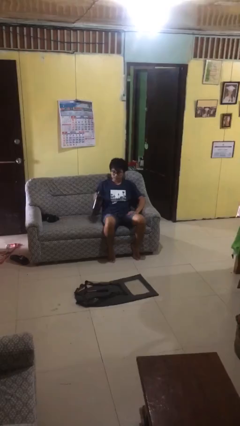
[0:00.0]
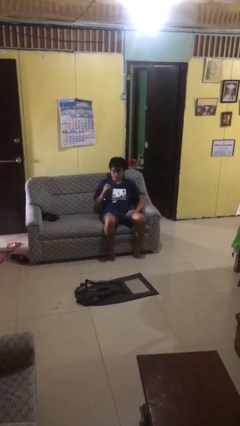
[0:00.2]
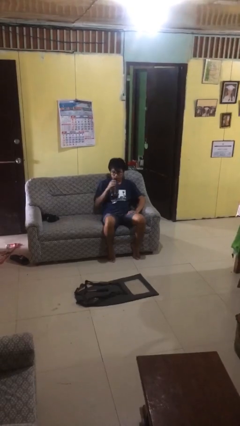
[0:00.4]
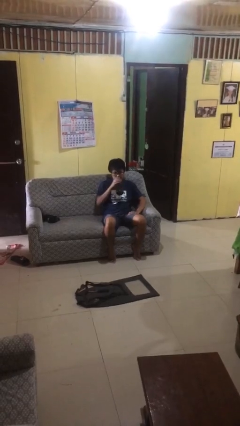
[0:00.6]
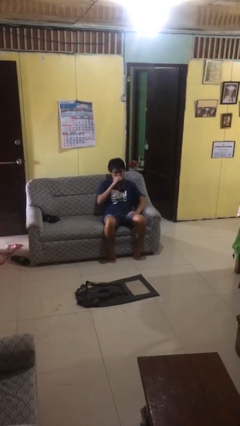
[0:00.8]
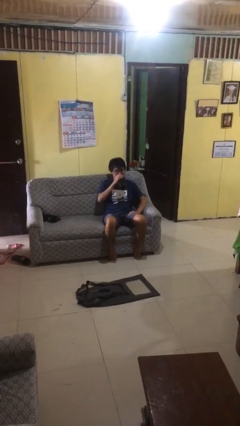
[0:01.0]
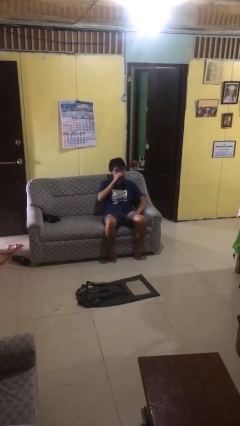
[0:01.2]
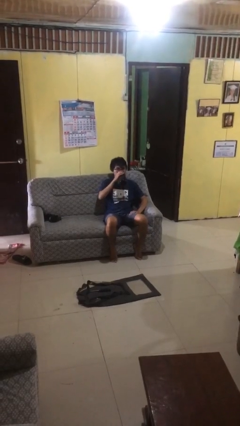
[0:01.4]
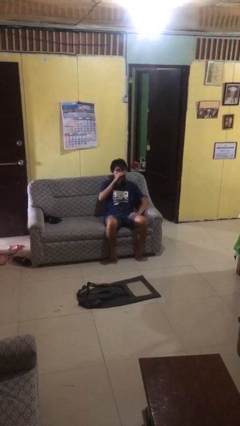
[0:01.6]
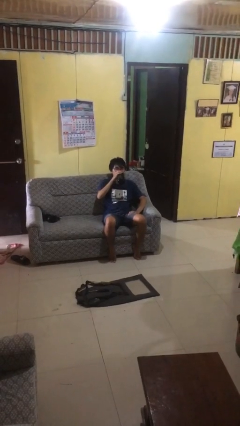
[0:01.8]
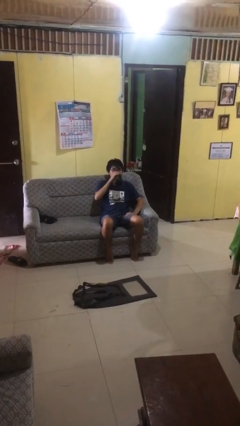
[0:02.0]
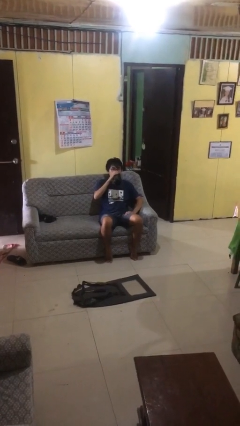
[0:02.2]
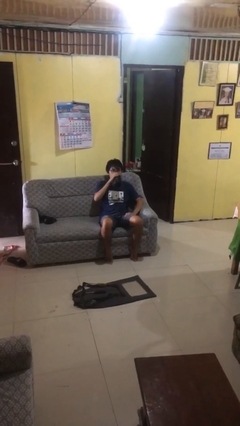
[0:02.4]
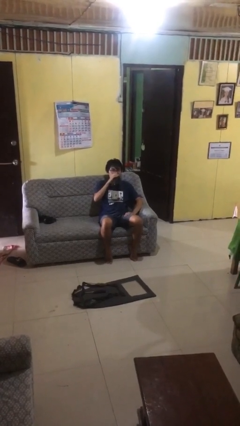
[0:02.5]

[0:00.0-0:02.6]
person drinks from bottle

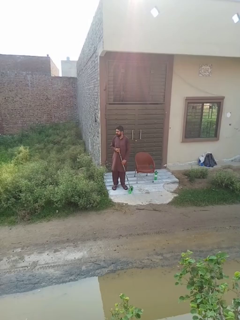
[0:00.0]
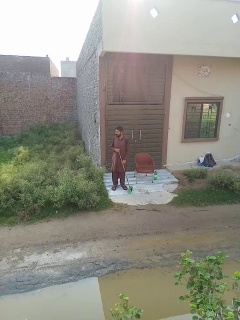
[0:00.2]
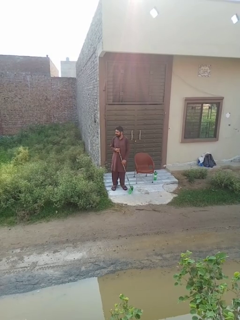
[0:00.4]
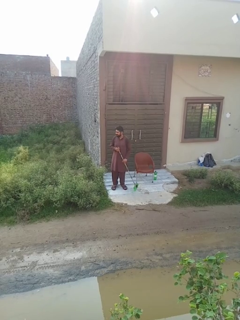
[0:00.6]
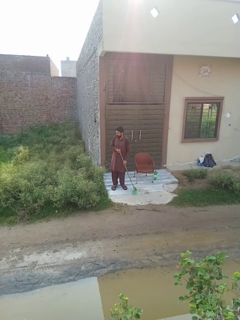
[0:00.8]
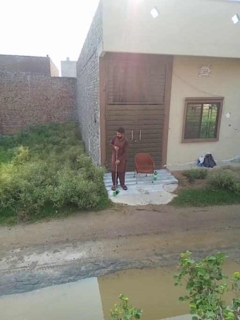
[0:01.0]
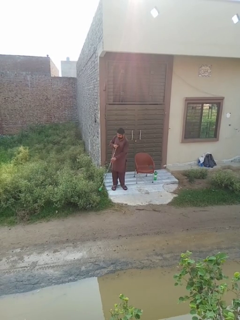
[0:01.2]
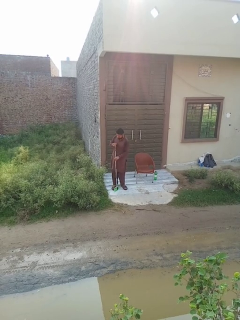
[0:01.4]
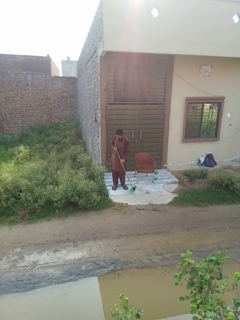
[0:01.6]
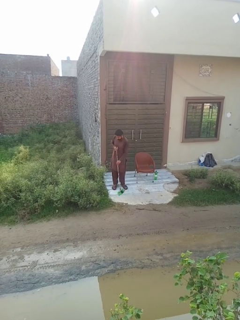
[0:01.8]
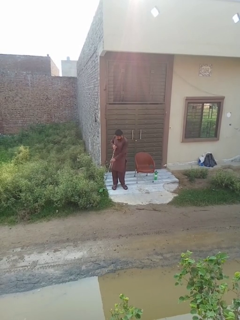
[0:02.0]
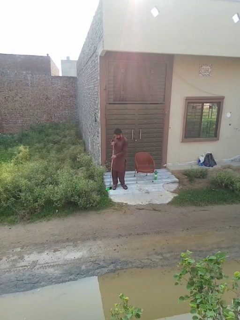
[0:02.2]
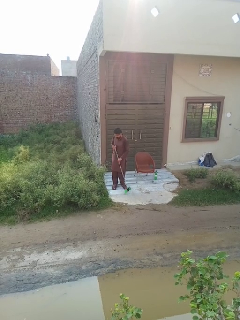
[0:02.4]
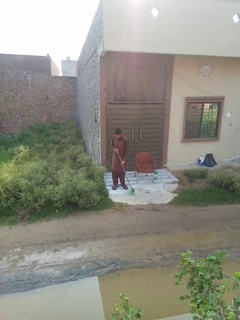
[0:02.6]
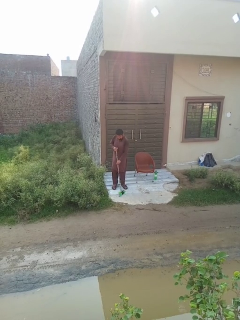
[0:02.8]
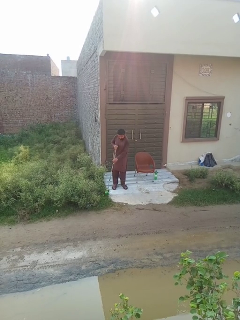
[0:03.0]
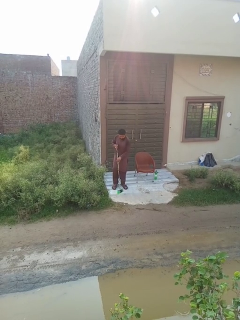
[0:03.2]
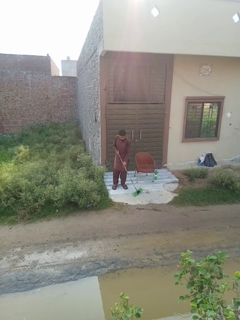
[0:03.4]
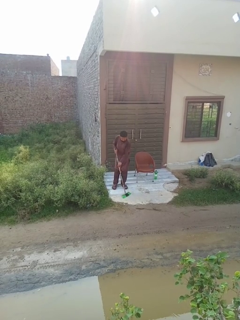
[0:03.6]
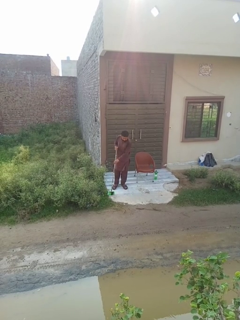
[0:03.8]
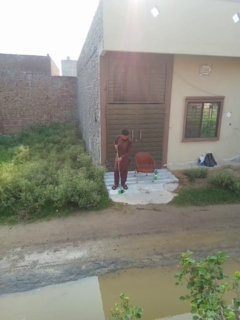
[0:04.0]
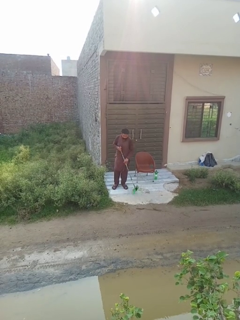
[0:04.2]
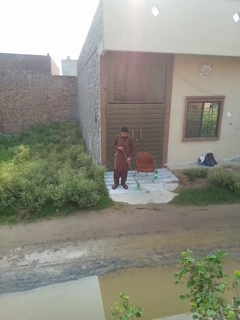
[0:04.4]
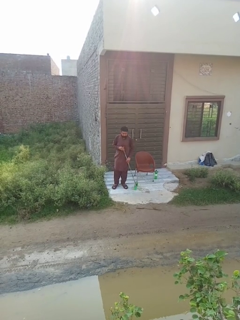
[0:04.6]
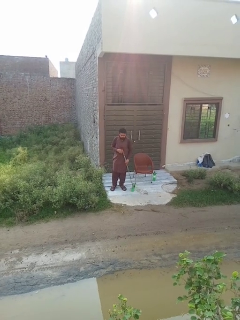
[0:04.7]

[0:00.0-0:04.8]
person sweeps floor

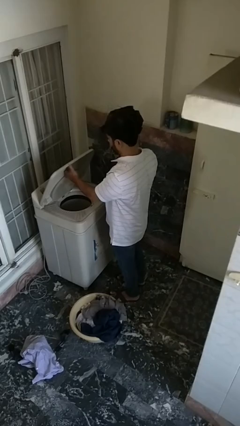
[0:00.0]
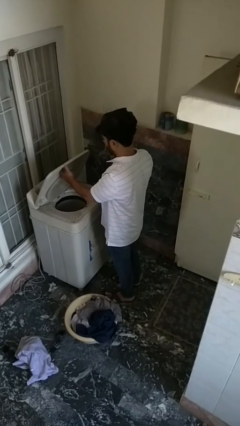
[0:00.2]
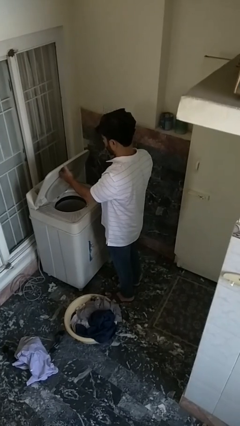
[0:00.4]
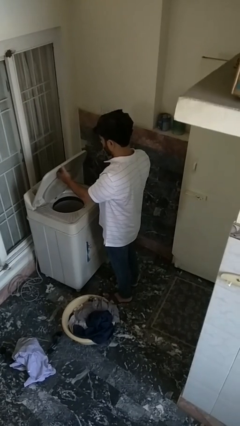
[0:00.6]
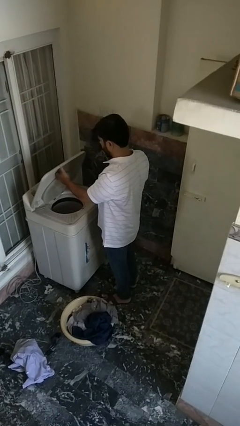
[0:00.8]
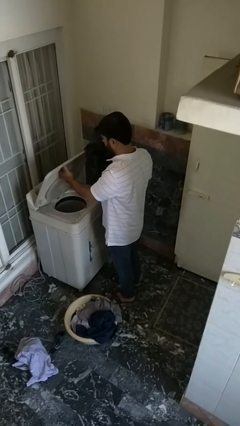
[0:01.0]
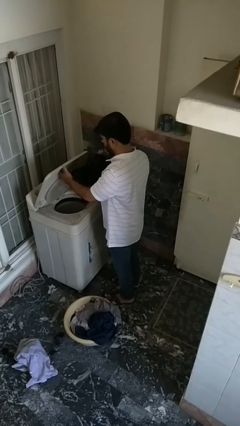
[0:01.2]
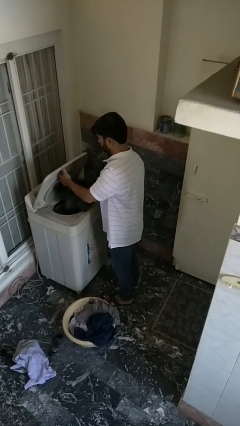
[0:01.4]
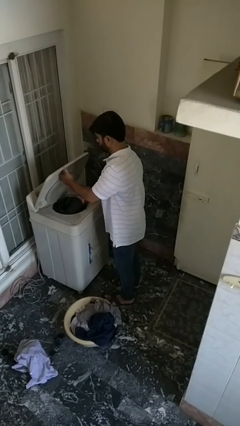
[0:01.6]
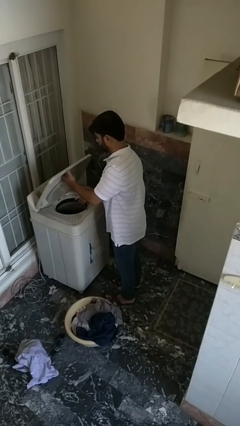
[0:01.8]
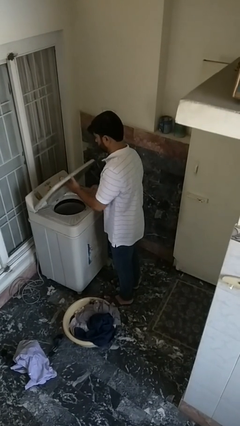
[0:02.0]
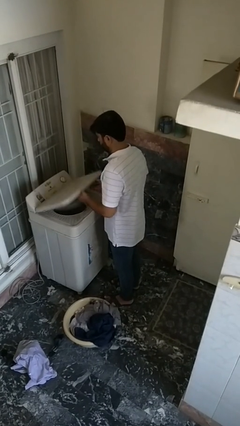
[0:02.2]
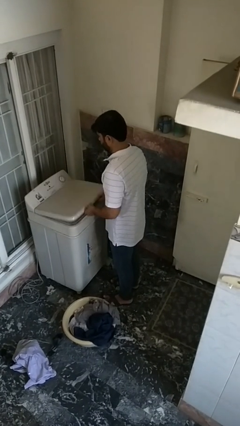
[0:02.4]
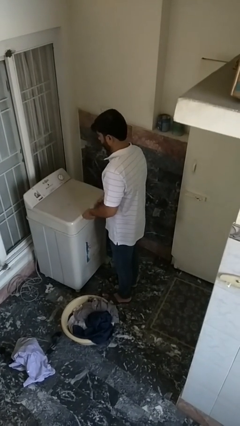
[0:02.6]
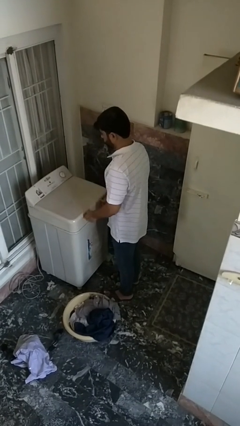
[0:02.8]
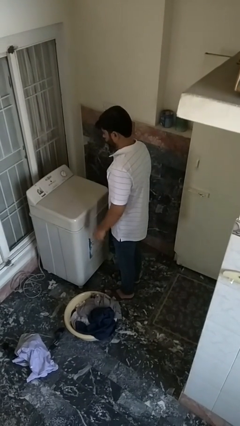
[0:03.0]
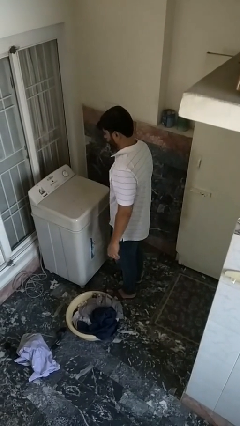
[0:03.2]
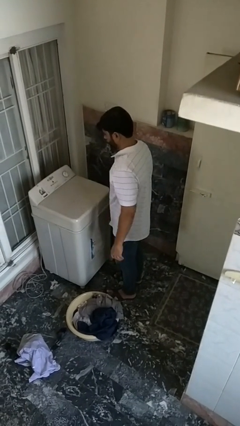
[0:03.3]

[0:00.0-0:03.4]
person loads dryer

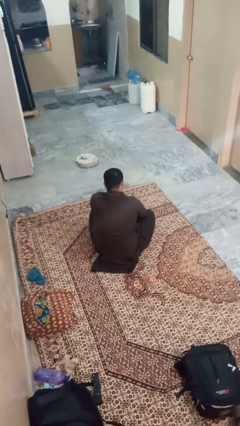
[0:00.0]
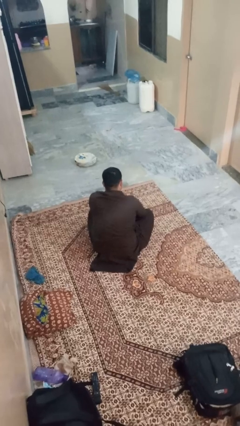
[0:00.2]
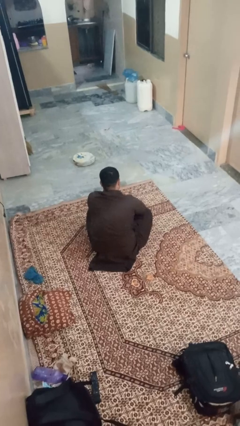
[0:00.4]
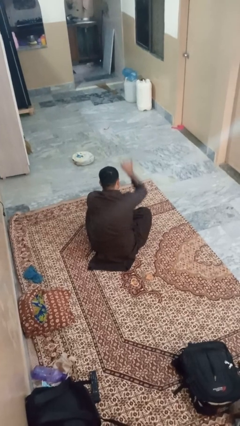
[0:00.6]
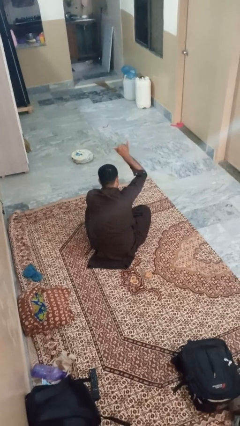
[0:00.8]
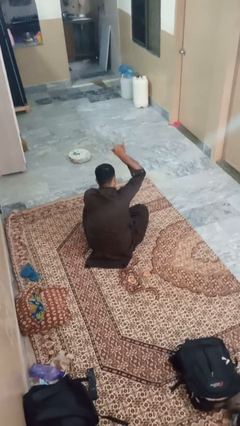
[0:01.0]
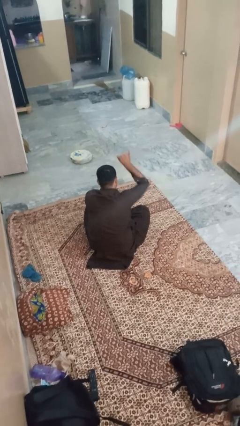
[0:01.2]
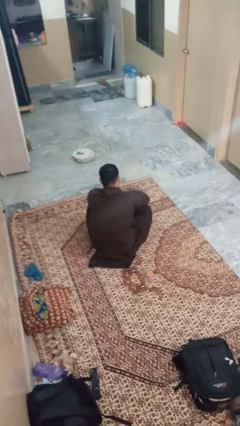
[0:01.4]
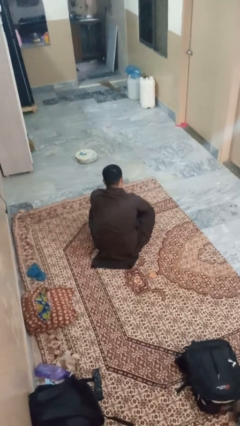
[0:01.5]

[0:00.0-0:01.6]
person gestures hang loose

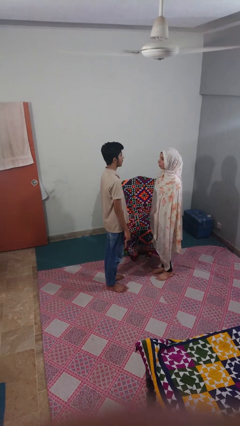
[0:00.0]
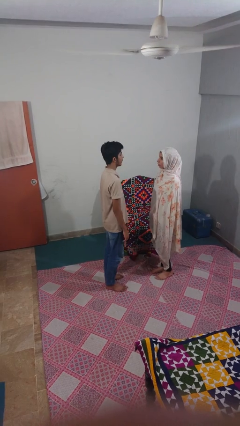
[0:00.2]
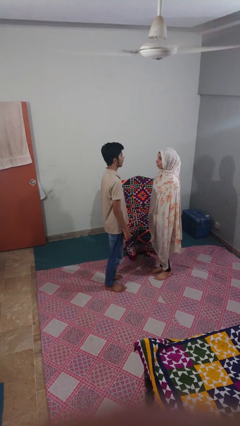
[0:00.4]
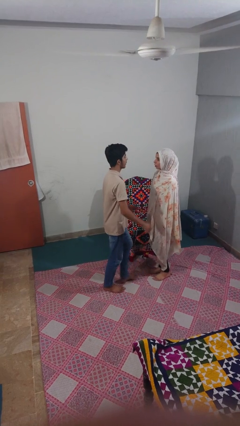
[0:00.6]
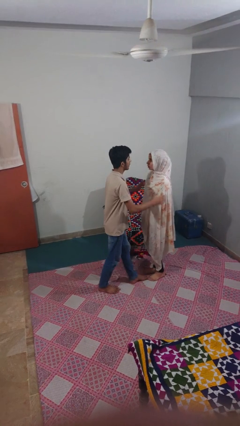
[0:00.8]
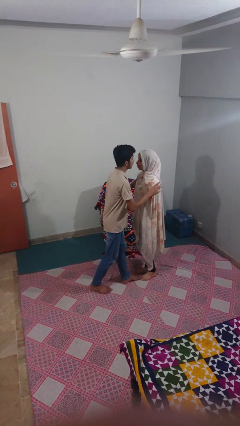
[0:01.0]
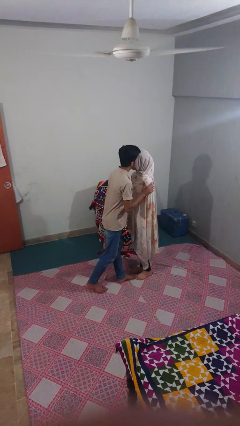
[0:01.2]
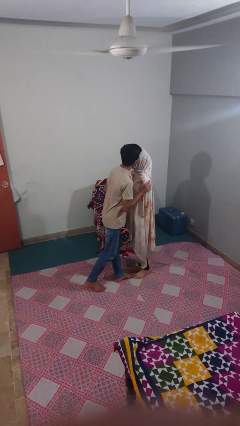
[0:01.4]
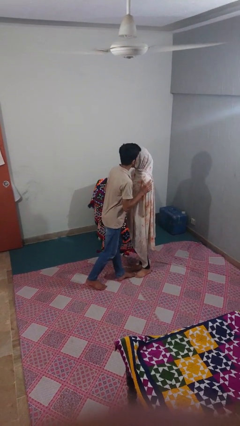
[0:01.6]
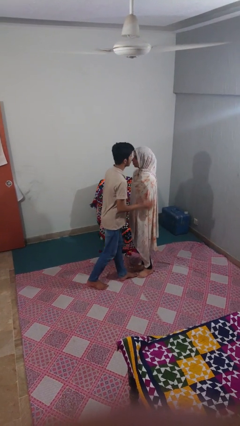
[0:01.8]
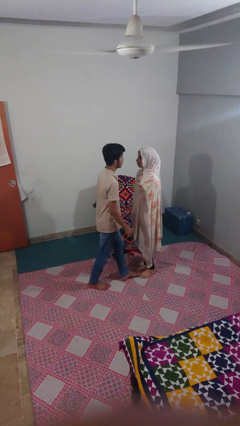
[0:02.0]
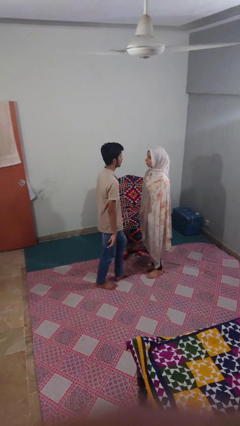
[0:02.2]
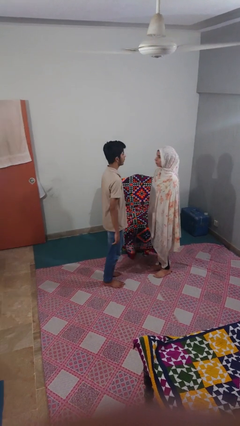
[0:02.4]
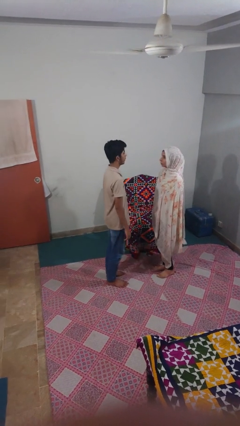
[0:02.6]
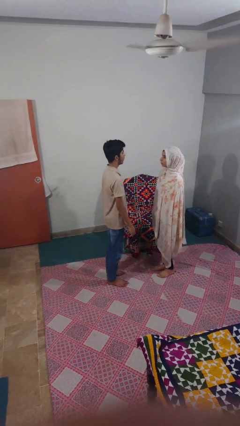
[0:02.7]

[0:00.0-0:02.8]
person kisses cheek of person

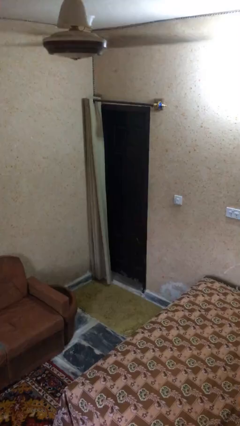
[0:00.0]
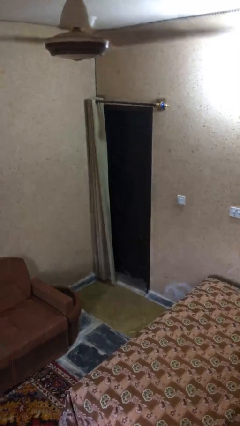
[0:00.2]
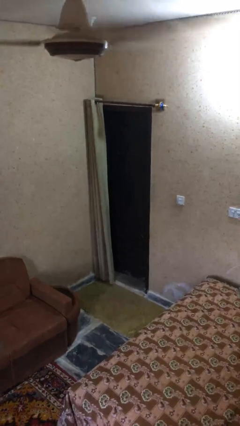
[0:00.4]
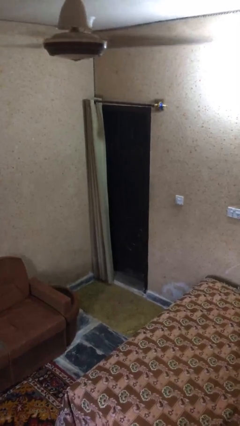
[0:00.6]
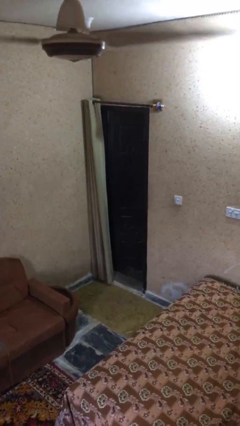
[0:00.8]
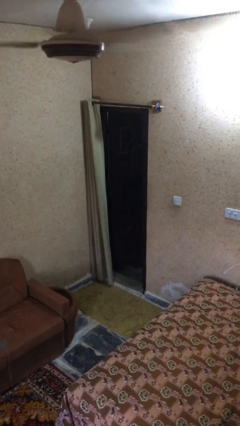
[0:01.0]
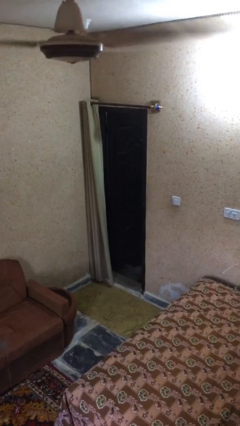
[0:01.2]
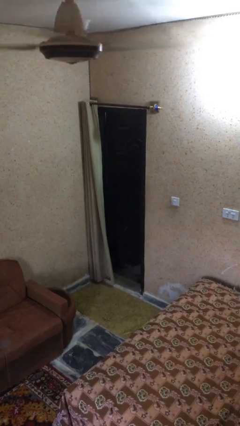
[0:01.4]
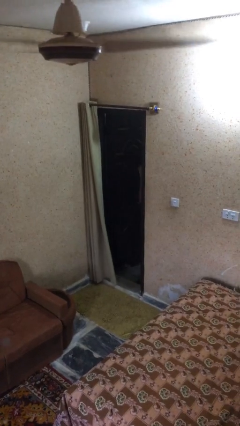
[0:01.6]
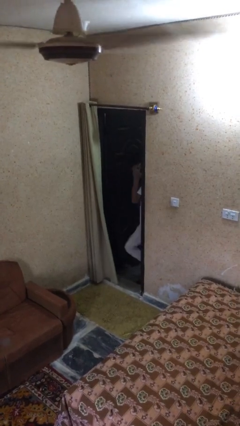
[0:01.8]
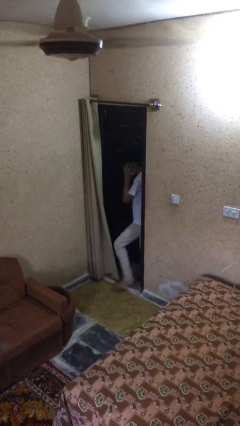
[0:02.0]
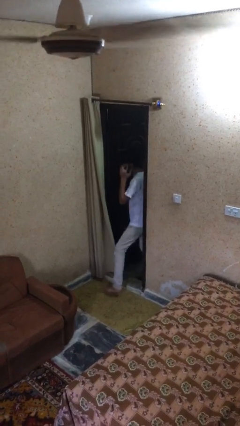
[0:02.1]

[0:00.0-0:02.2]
person opens facility door

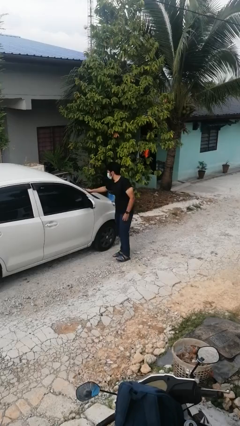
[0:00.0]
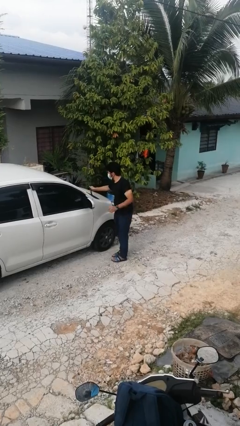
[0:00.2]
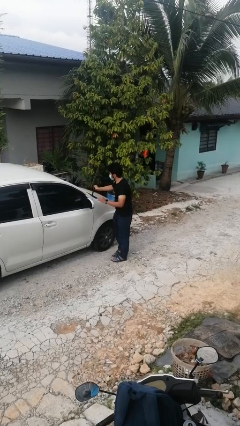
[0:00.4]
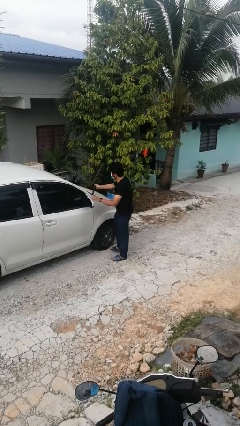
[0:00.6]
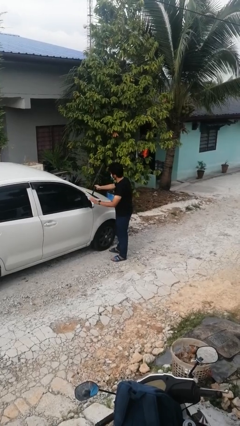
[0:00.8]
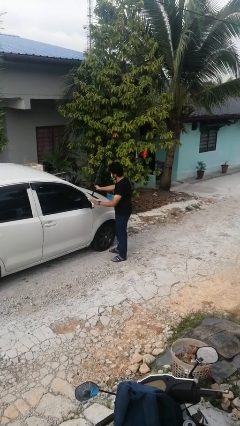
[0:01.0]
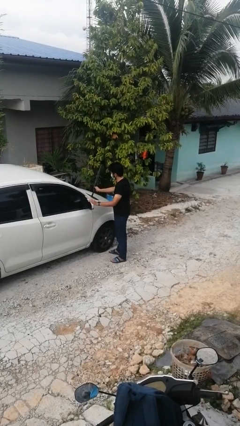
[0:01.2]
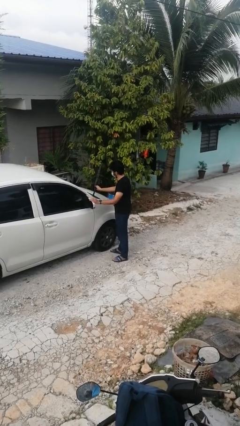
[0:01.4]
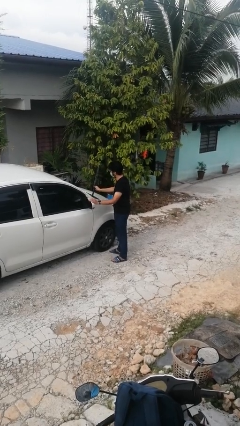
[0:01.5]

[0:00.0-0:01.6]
person flips up car wipers
